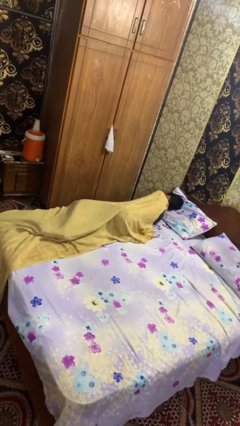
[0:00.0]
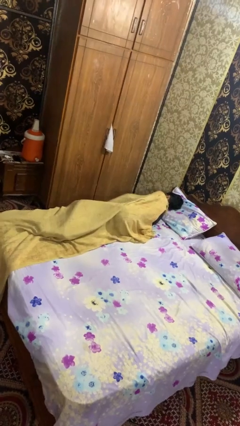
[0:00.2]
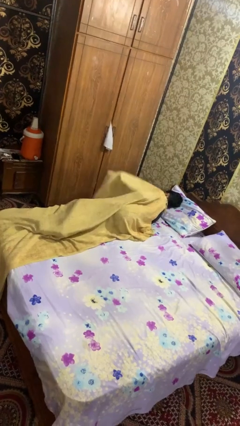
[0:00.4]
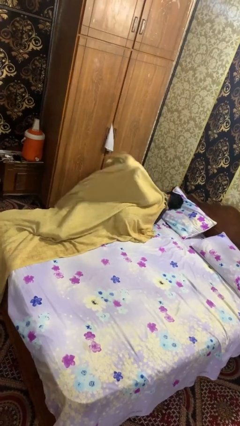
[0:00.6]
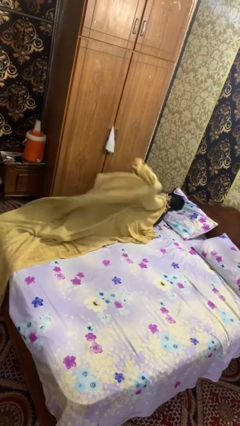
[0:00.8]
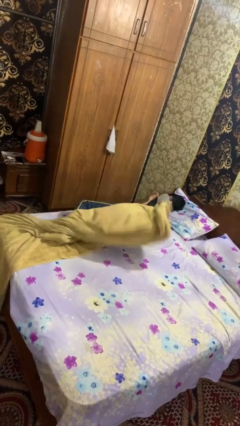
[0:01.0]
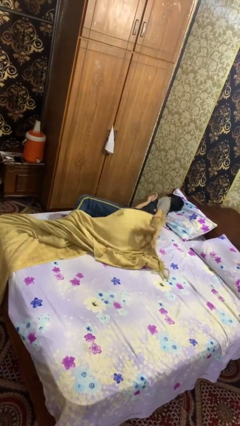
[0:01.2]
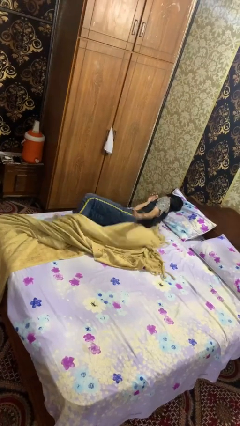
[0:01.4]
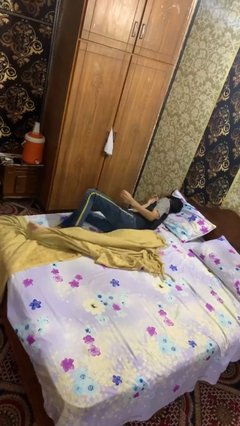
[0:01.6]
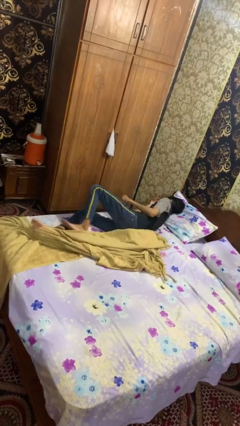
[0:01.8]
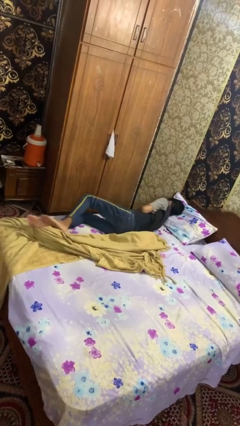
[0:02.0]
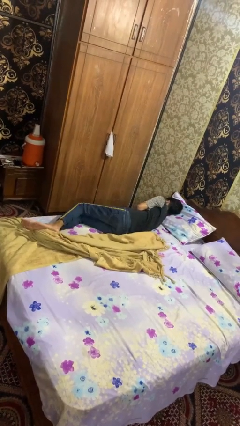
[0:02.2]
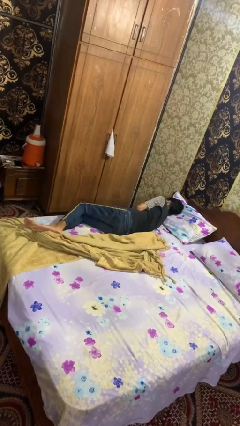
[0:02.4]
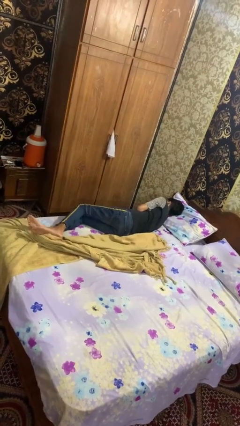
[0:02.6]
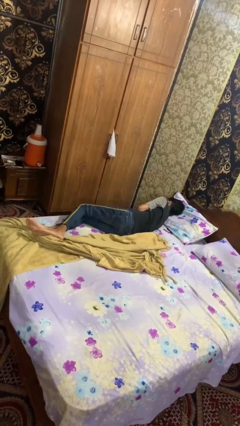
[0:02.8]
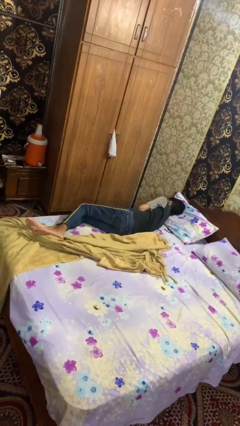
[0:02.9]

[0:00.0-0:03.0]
person uncovers with bedsheets

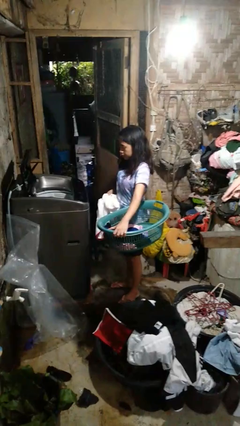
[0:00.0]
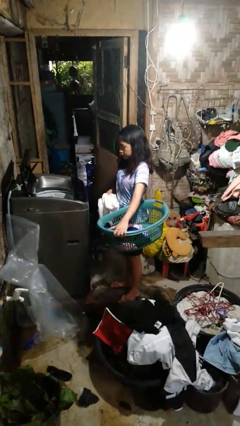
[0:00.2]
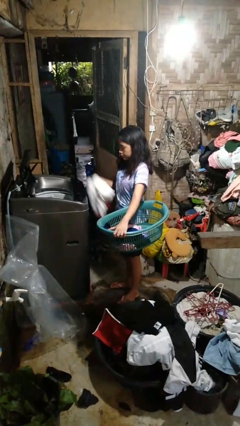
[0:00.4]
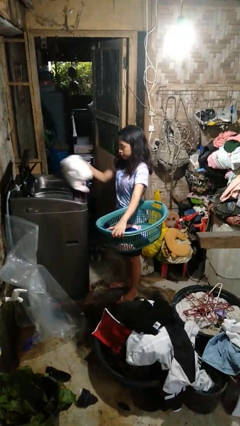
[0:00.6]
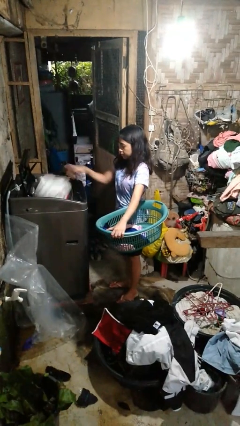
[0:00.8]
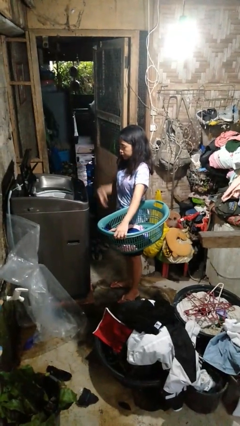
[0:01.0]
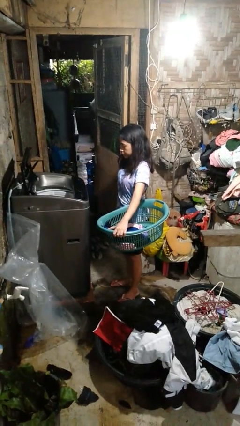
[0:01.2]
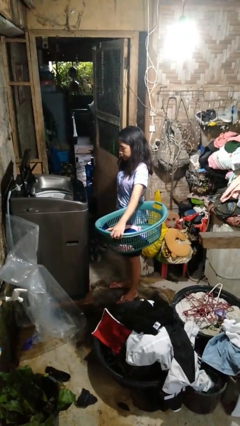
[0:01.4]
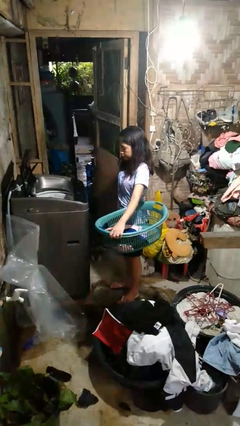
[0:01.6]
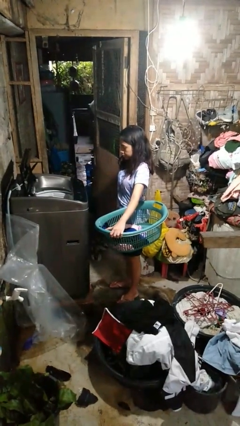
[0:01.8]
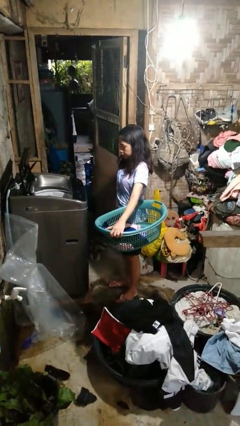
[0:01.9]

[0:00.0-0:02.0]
person loads dryer

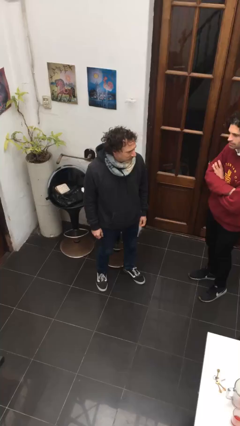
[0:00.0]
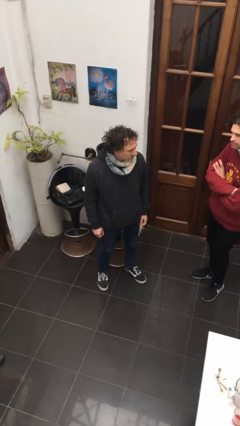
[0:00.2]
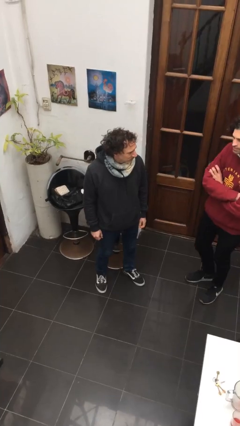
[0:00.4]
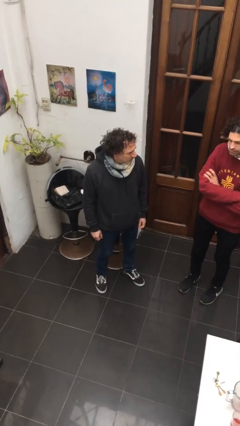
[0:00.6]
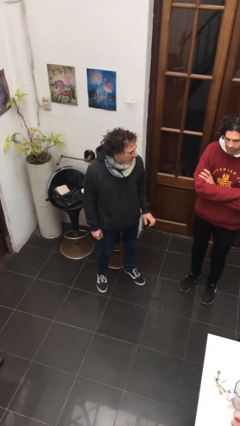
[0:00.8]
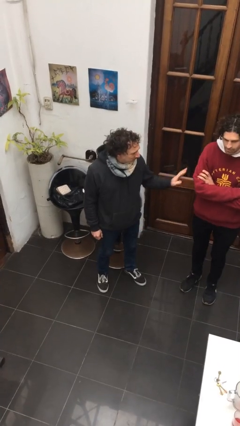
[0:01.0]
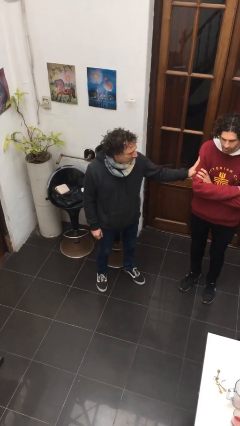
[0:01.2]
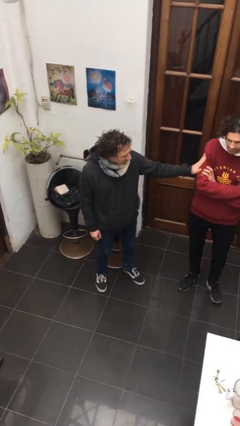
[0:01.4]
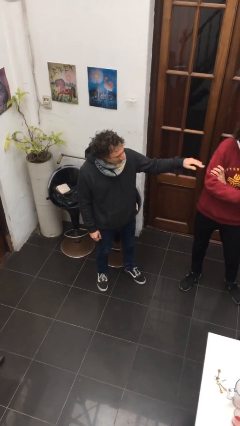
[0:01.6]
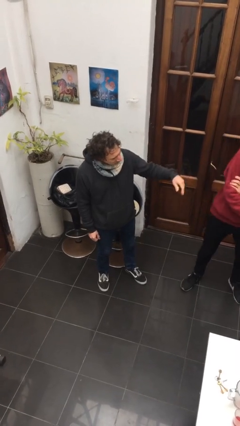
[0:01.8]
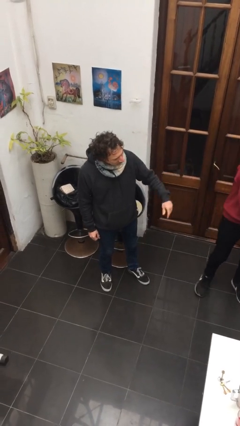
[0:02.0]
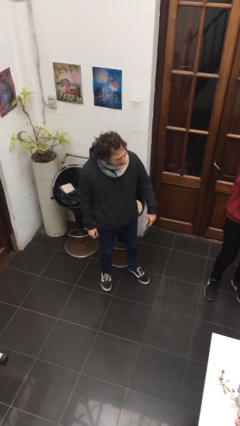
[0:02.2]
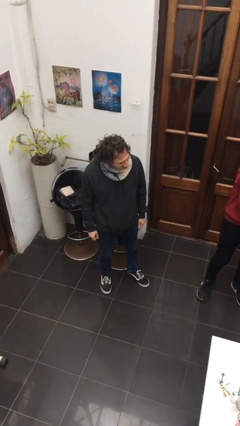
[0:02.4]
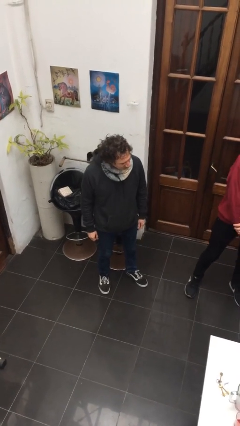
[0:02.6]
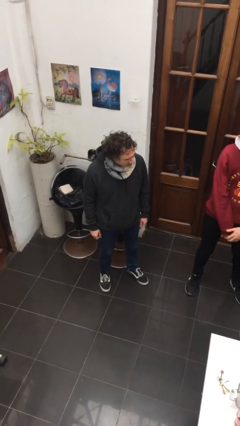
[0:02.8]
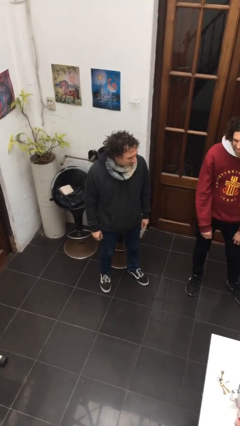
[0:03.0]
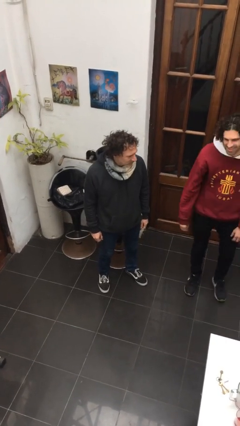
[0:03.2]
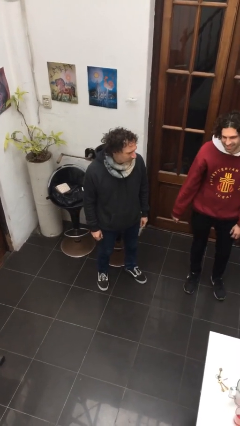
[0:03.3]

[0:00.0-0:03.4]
person shoves person

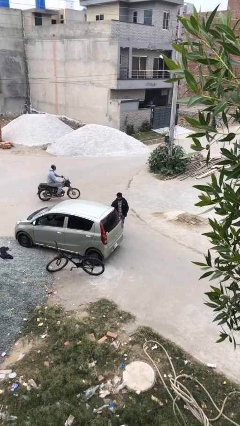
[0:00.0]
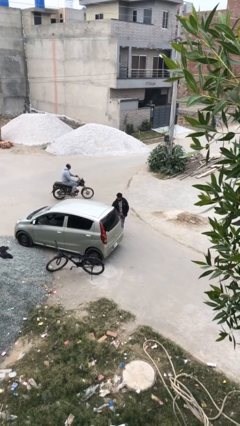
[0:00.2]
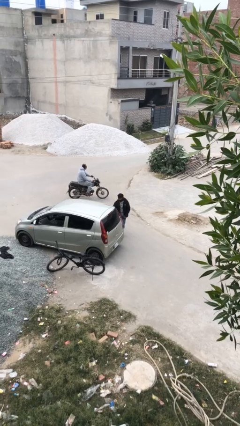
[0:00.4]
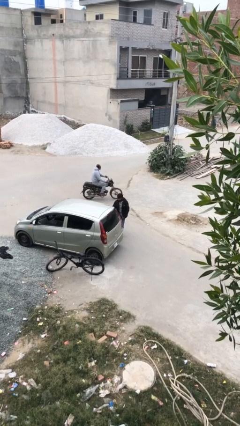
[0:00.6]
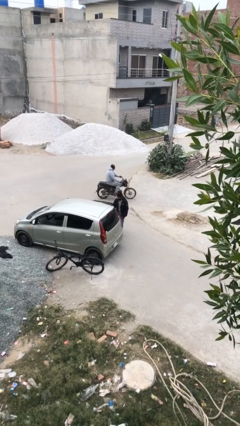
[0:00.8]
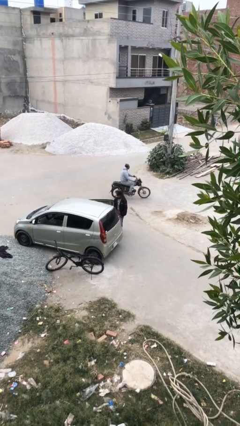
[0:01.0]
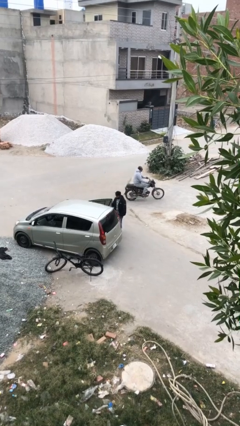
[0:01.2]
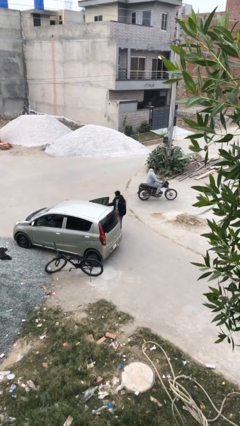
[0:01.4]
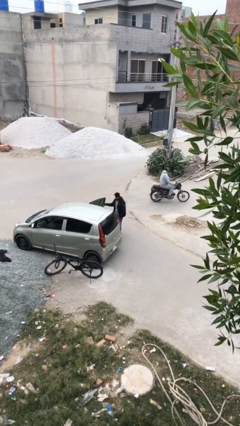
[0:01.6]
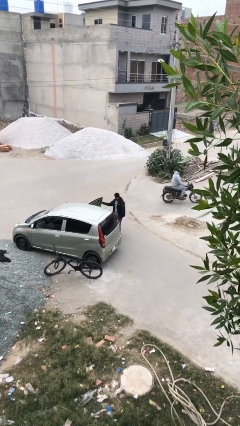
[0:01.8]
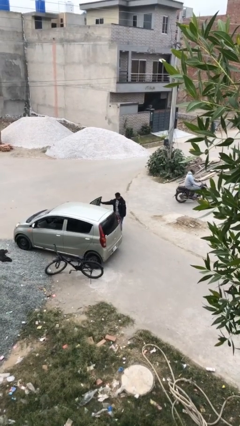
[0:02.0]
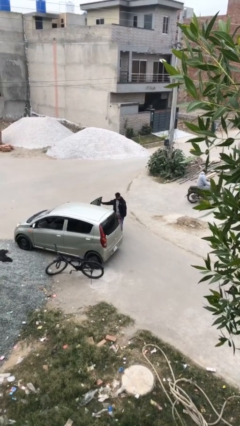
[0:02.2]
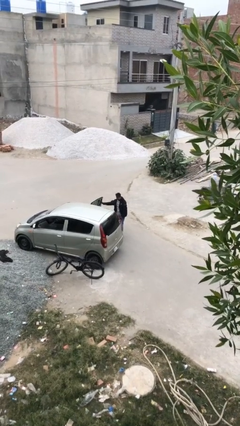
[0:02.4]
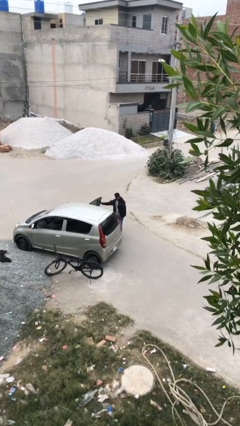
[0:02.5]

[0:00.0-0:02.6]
person opens car door

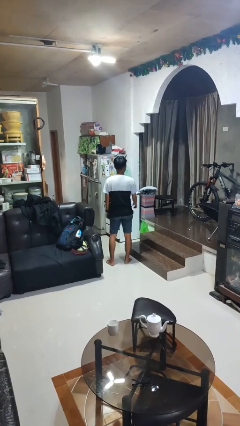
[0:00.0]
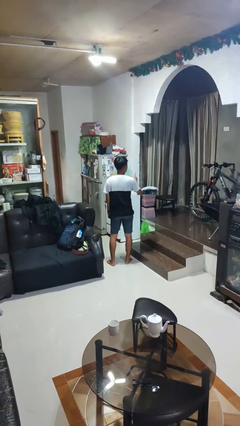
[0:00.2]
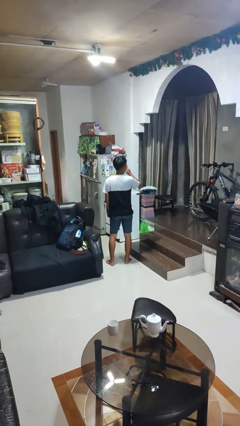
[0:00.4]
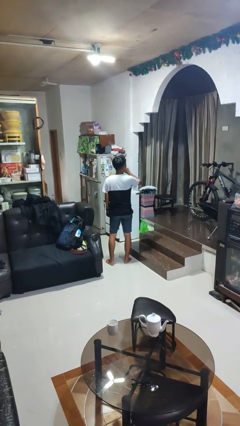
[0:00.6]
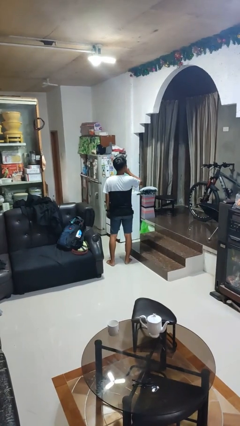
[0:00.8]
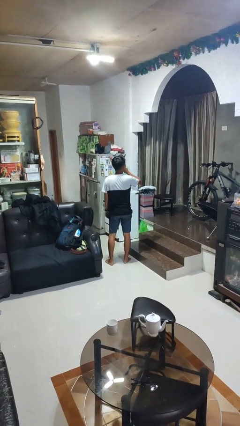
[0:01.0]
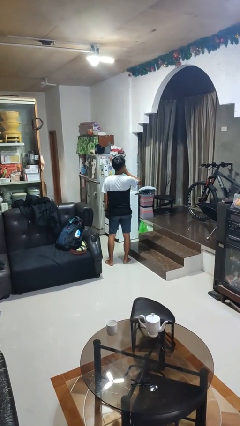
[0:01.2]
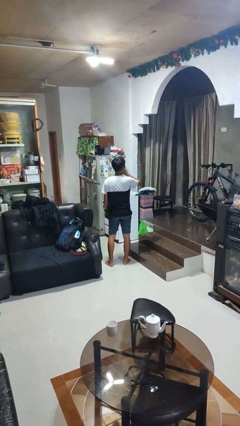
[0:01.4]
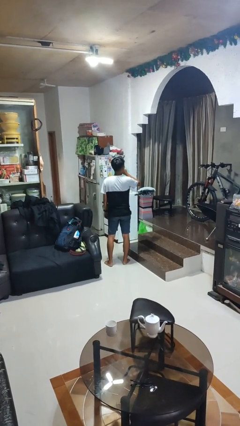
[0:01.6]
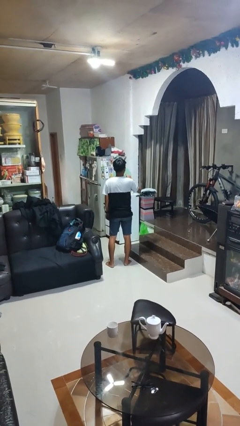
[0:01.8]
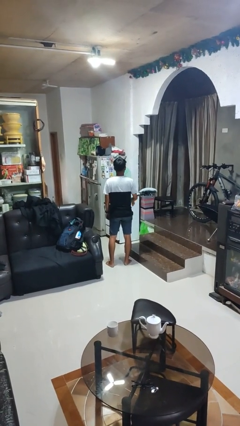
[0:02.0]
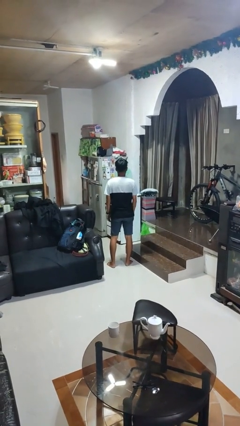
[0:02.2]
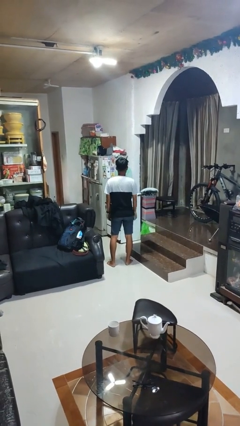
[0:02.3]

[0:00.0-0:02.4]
person gestures behind me

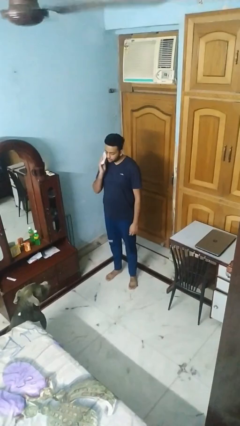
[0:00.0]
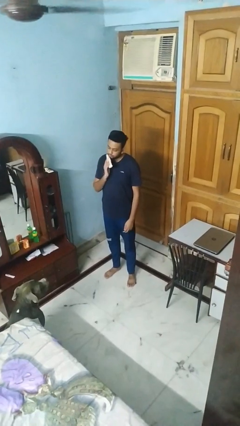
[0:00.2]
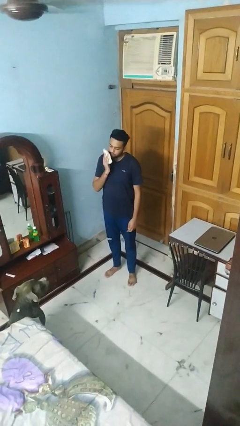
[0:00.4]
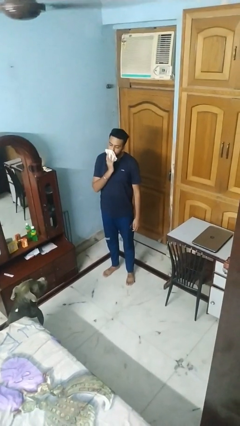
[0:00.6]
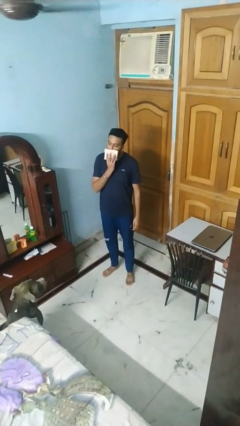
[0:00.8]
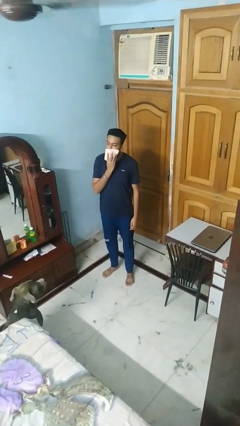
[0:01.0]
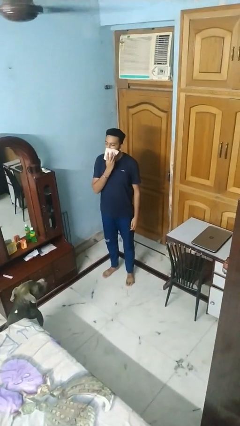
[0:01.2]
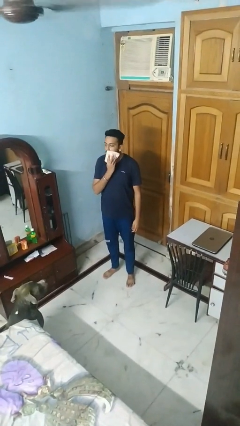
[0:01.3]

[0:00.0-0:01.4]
person wipes mouth with napkin

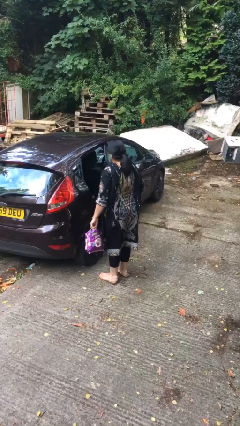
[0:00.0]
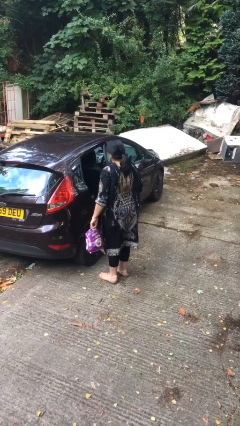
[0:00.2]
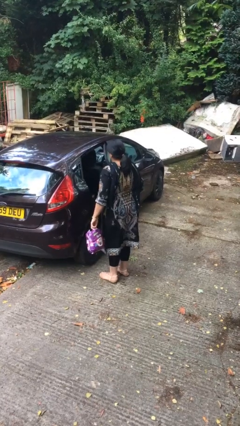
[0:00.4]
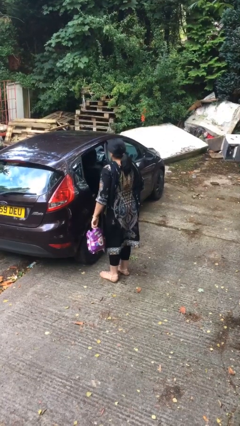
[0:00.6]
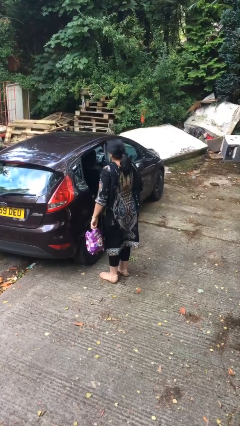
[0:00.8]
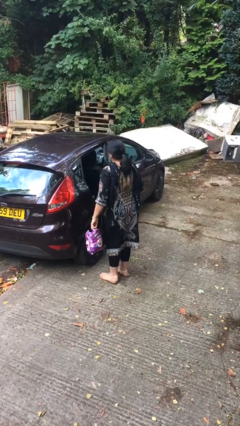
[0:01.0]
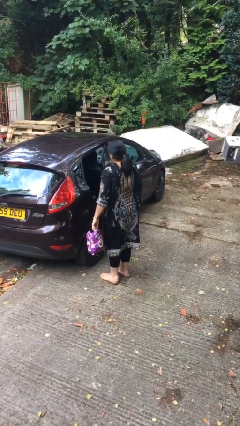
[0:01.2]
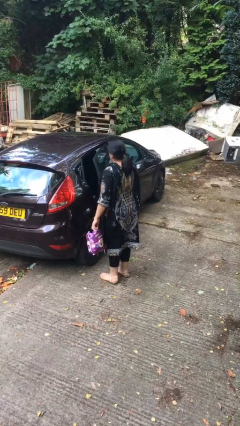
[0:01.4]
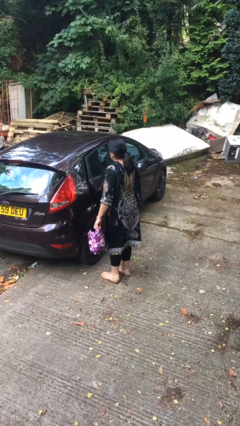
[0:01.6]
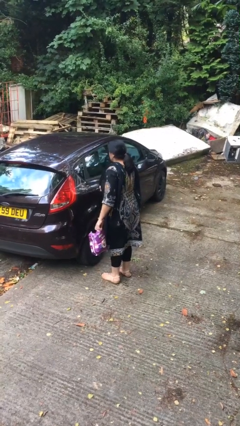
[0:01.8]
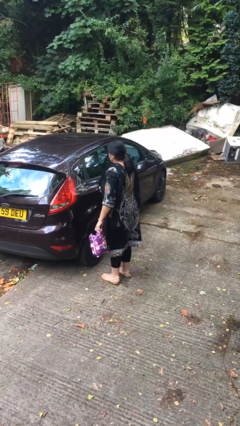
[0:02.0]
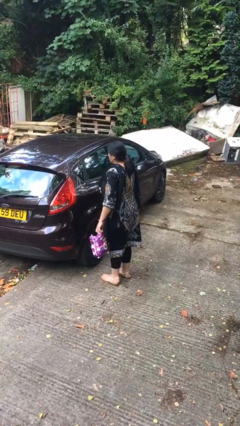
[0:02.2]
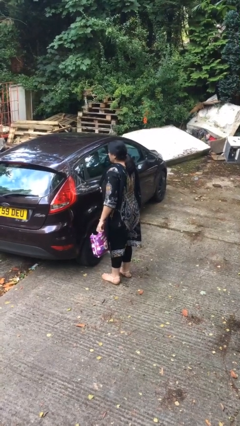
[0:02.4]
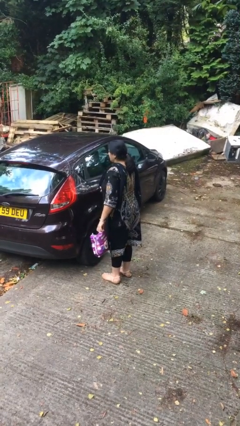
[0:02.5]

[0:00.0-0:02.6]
person closes car door
